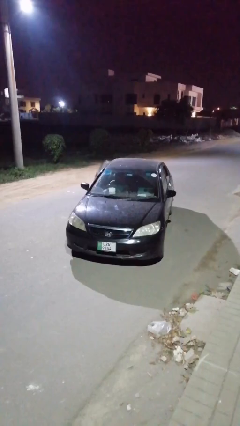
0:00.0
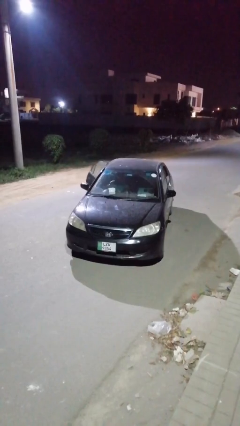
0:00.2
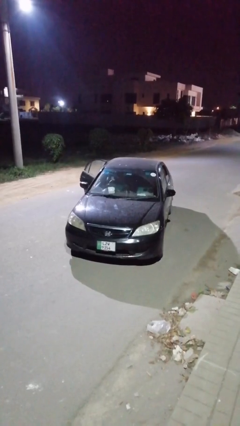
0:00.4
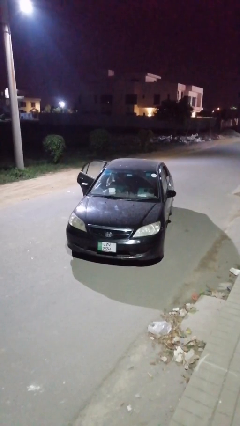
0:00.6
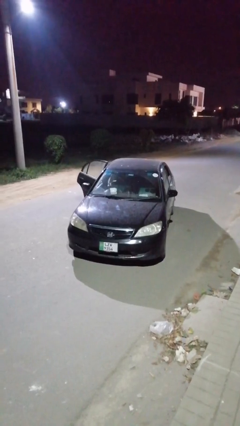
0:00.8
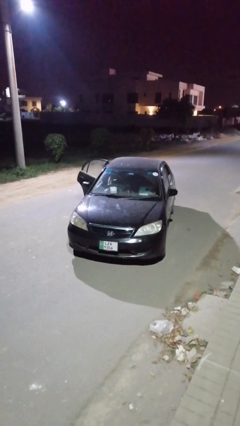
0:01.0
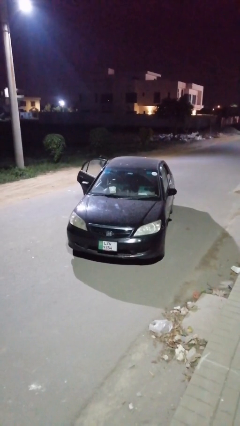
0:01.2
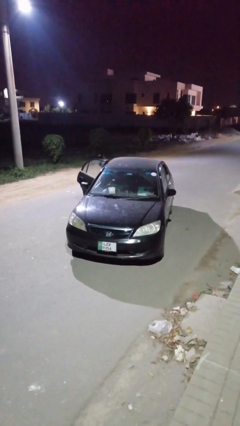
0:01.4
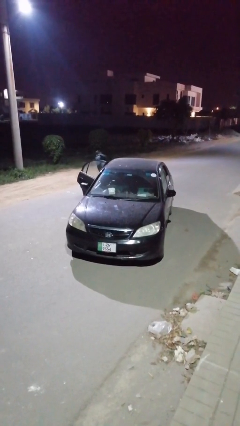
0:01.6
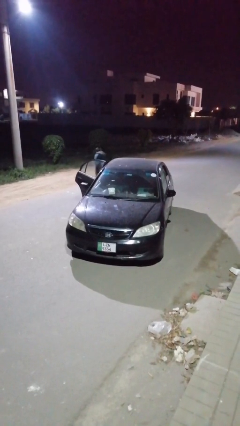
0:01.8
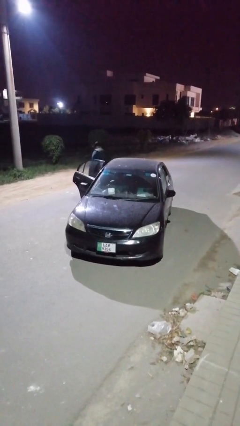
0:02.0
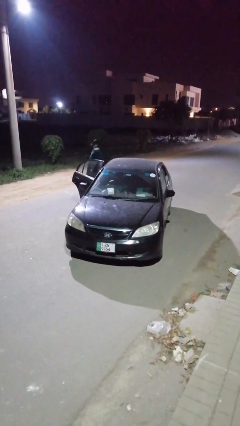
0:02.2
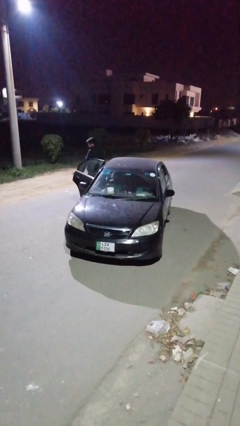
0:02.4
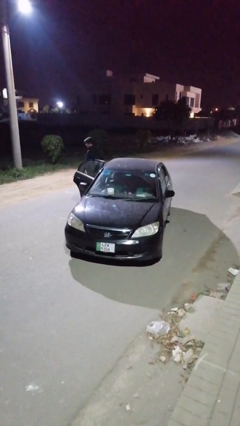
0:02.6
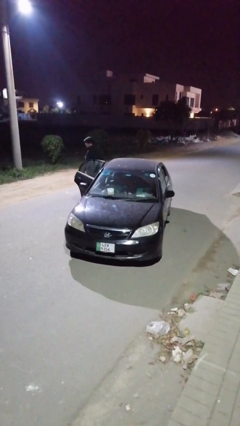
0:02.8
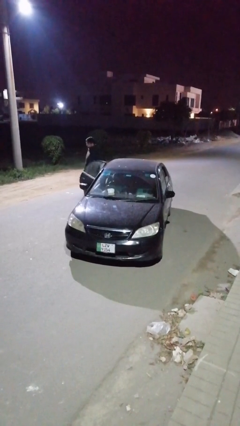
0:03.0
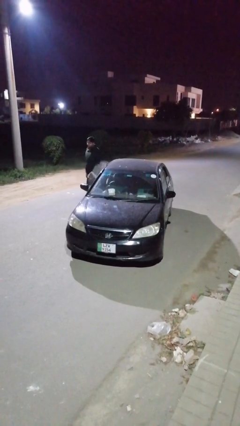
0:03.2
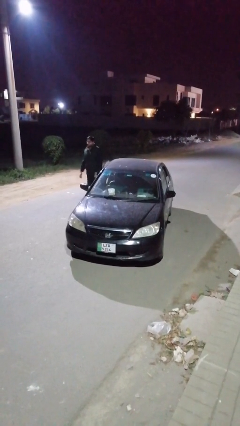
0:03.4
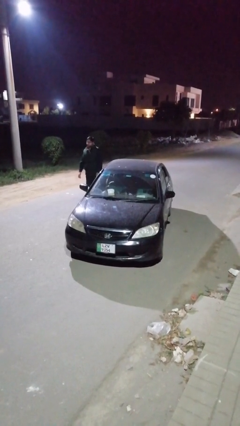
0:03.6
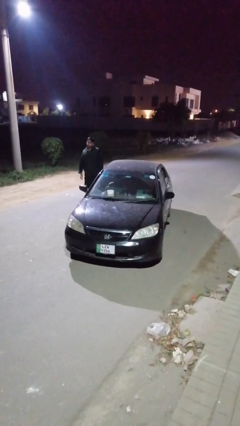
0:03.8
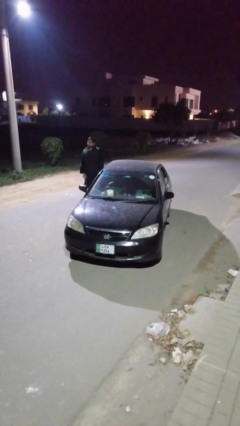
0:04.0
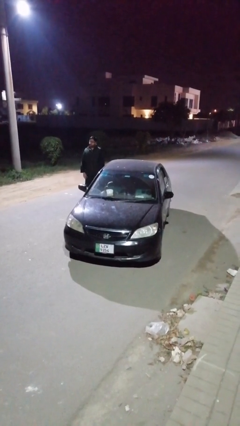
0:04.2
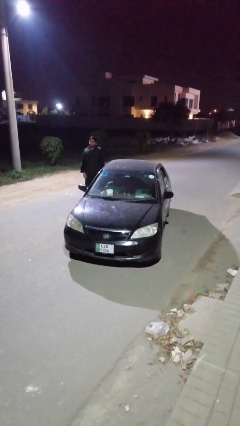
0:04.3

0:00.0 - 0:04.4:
car drops off person

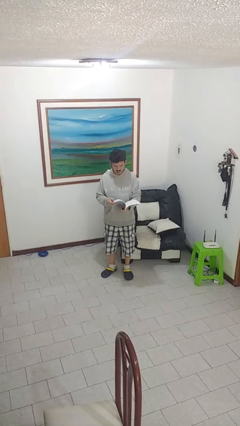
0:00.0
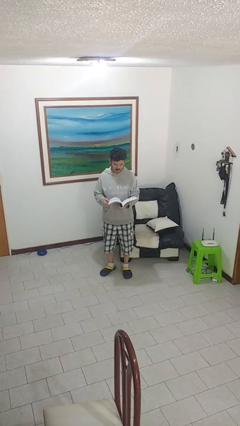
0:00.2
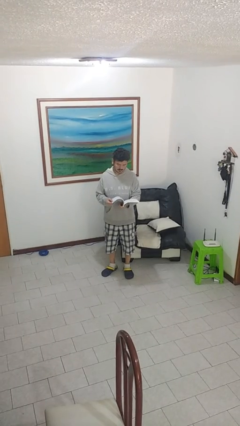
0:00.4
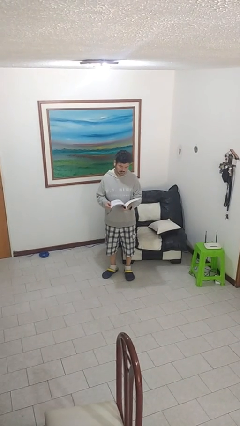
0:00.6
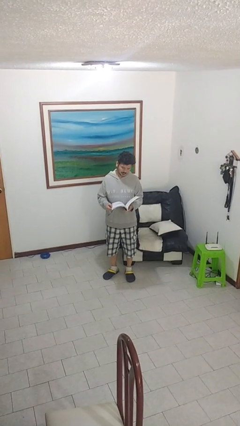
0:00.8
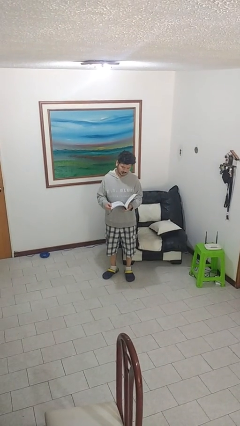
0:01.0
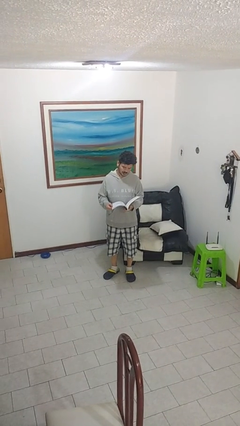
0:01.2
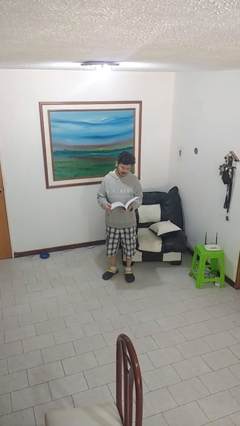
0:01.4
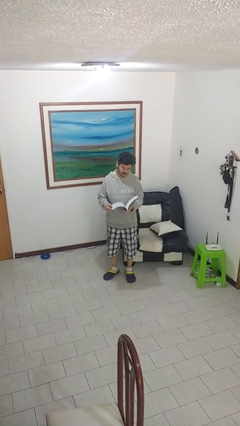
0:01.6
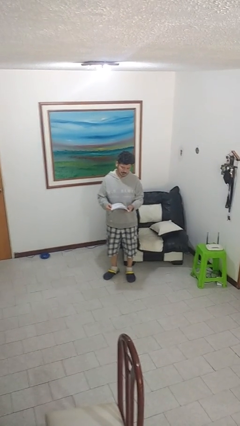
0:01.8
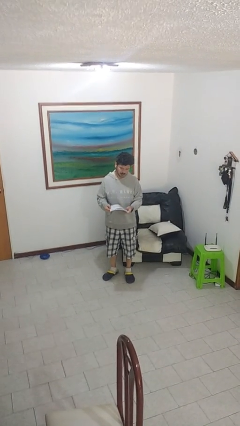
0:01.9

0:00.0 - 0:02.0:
person reads magazine

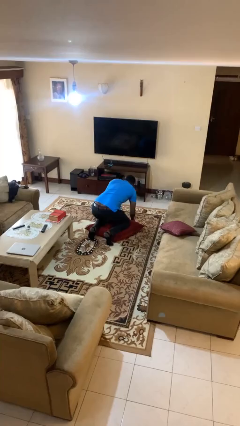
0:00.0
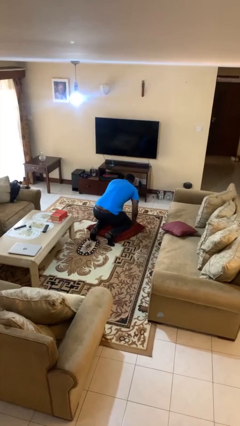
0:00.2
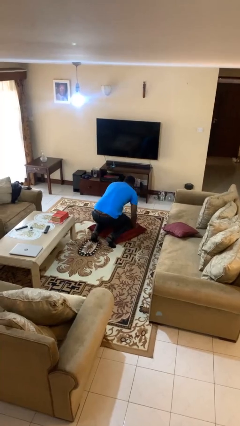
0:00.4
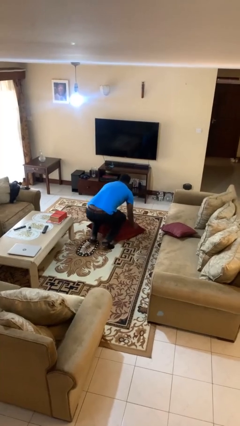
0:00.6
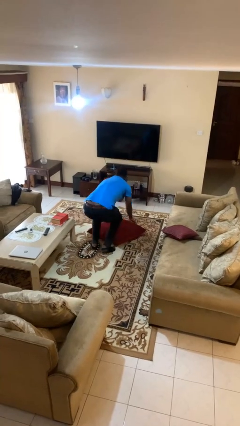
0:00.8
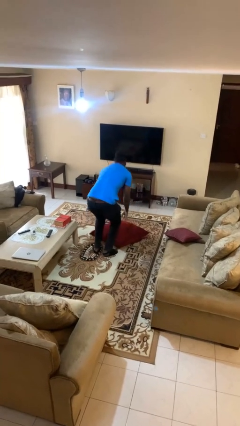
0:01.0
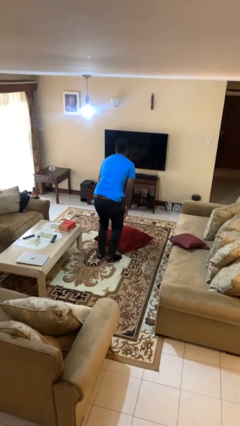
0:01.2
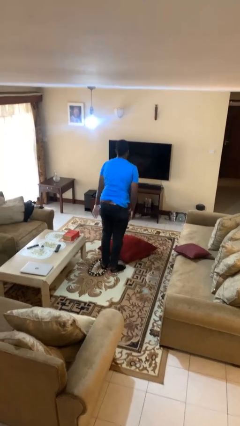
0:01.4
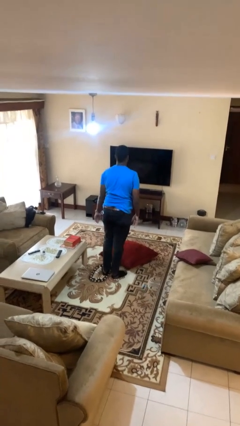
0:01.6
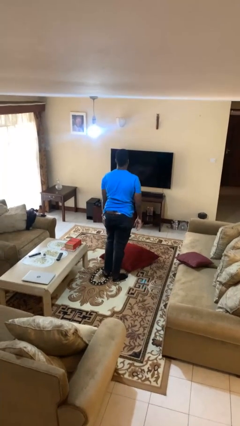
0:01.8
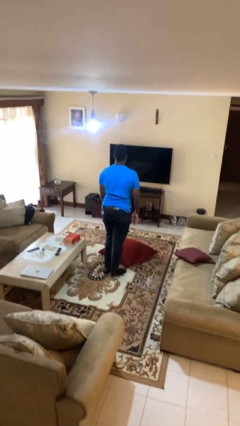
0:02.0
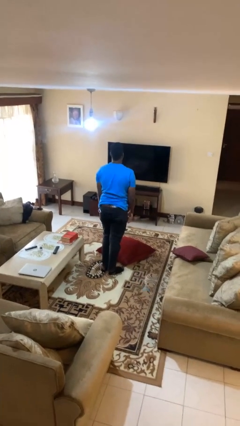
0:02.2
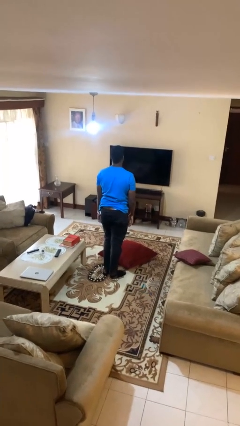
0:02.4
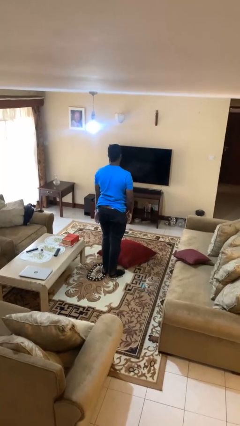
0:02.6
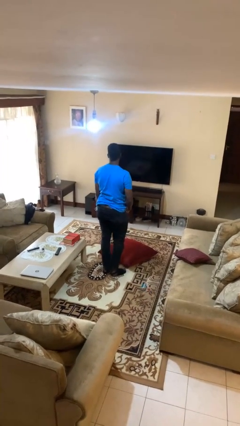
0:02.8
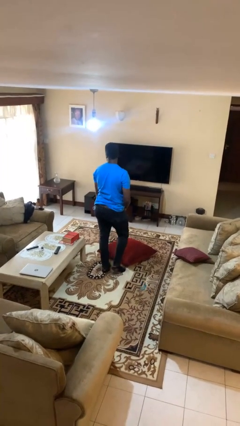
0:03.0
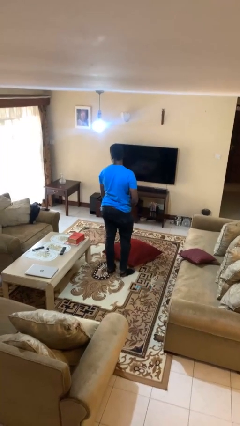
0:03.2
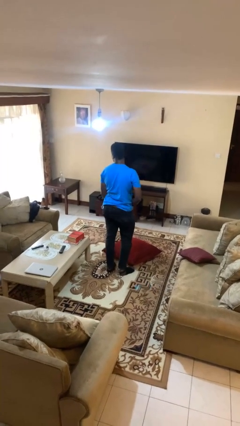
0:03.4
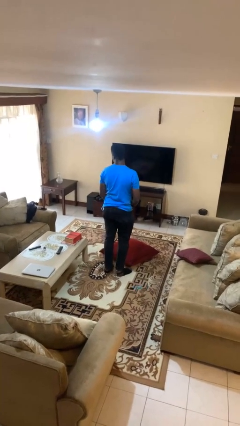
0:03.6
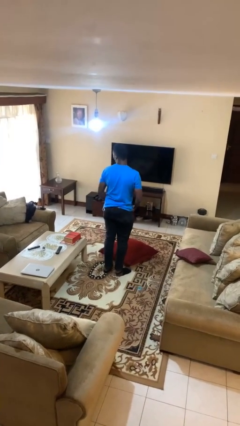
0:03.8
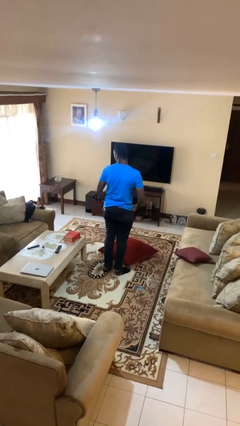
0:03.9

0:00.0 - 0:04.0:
person stands up from floor

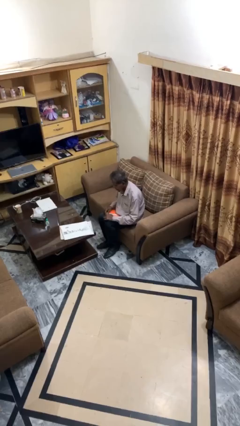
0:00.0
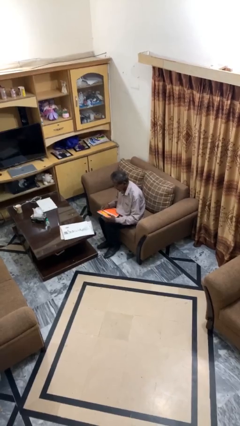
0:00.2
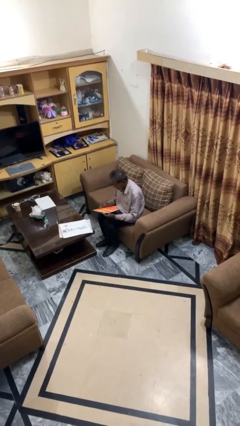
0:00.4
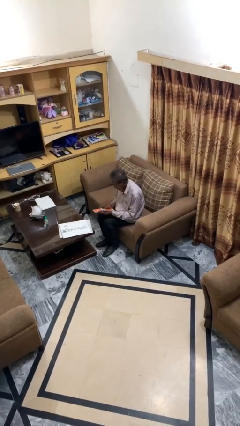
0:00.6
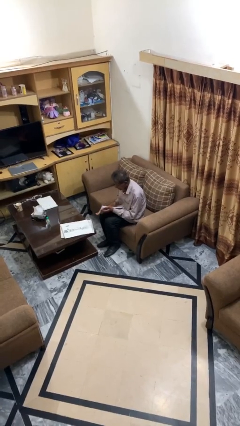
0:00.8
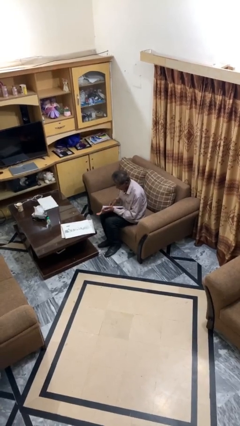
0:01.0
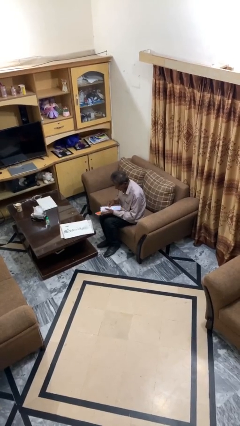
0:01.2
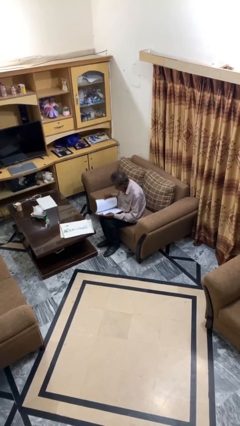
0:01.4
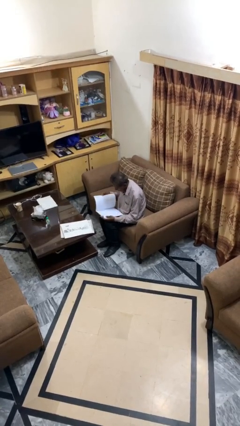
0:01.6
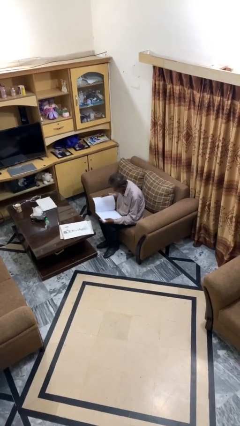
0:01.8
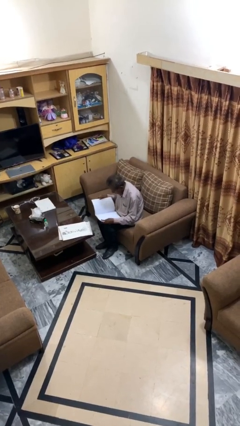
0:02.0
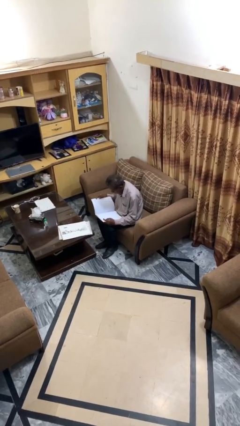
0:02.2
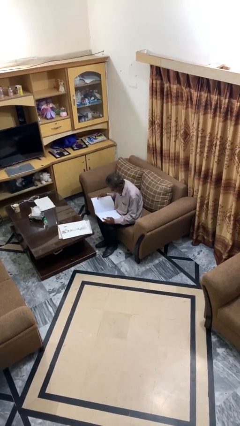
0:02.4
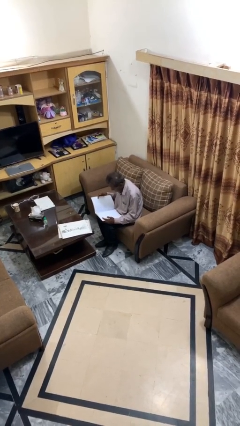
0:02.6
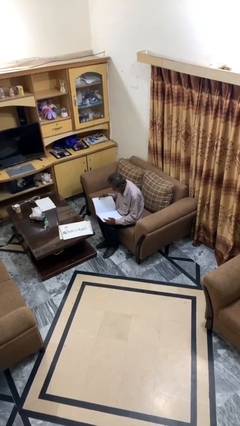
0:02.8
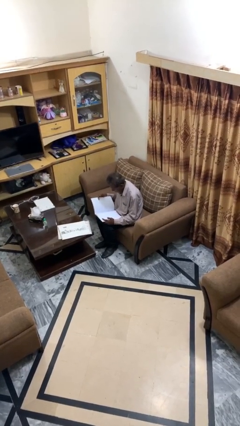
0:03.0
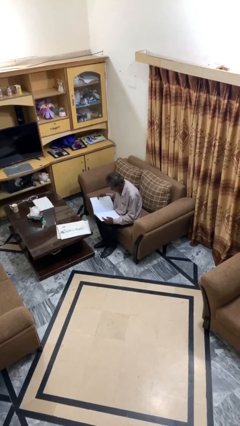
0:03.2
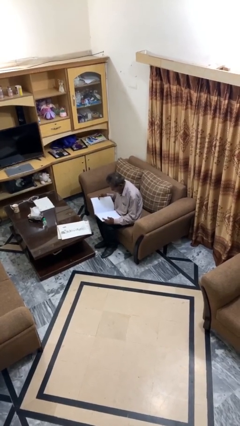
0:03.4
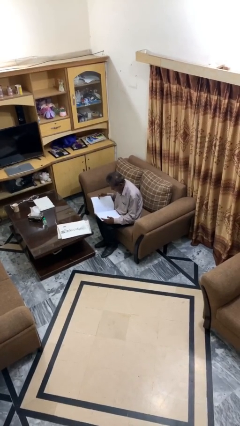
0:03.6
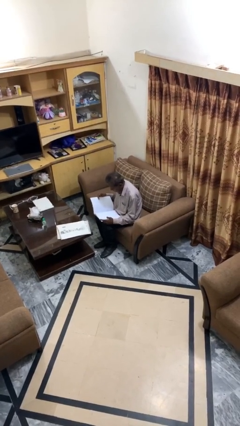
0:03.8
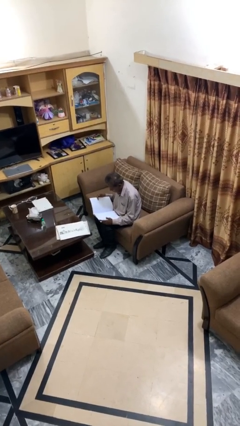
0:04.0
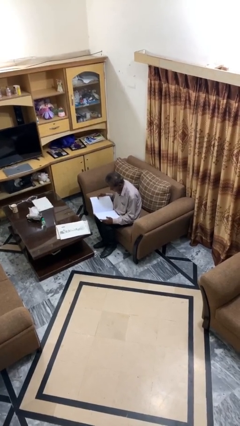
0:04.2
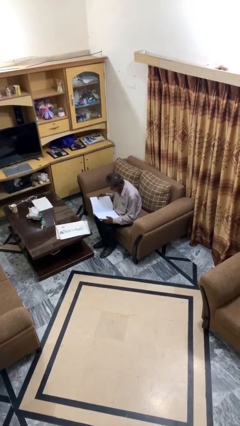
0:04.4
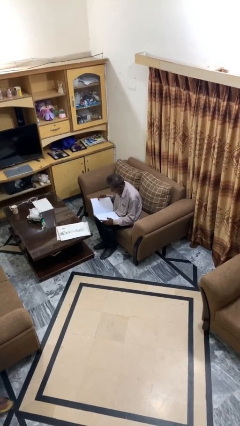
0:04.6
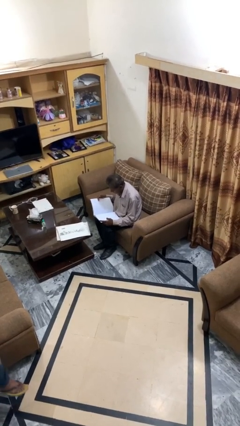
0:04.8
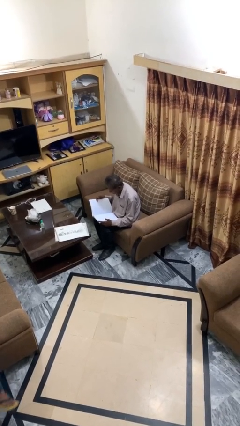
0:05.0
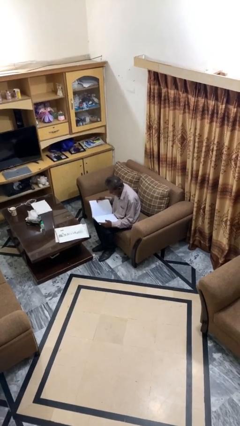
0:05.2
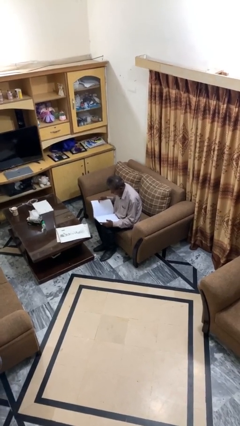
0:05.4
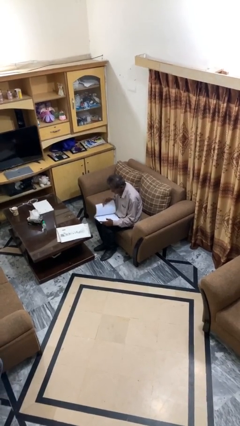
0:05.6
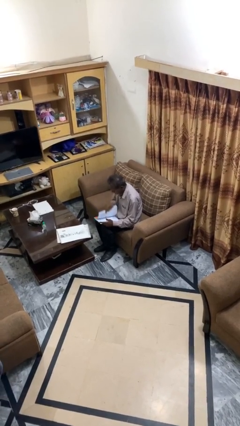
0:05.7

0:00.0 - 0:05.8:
person reads document

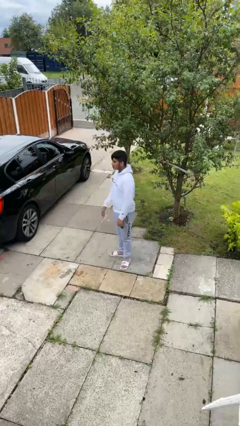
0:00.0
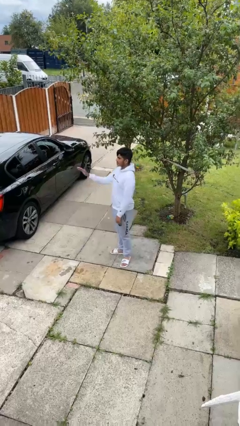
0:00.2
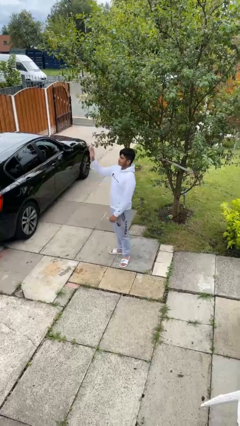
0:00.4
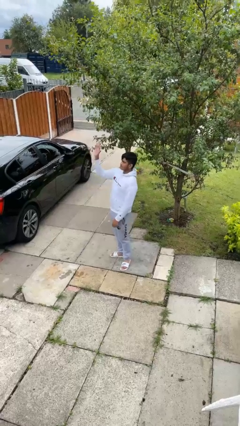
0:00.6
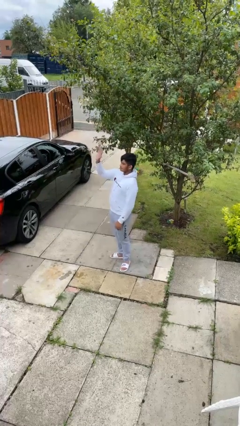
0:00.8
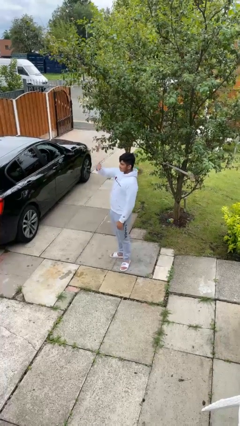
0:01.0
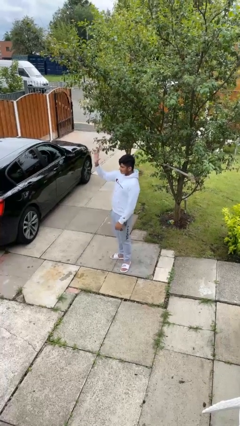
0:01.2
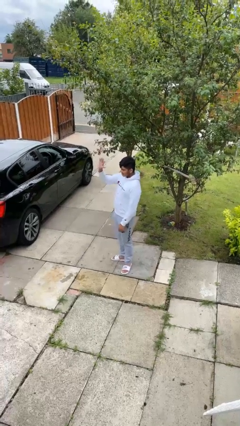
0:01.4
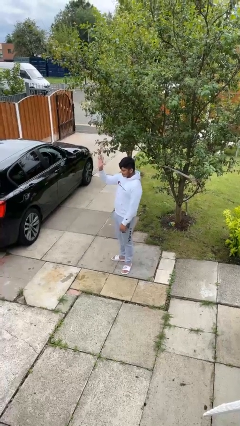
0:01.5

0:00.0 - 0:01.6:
person waves at person

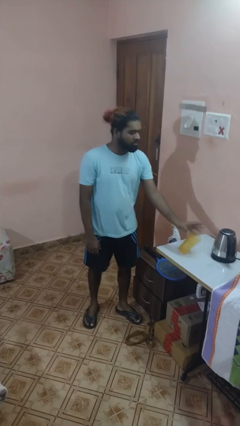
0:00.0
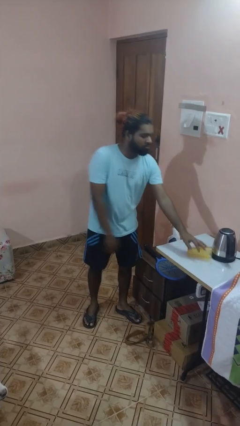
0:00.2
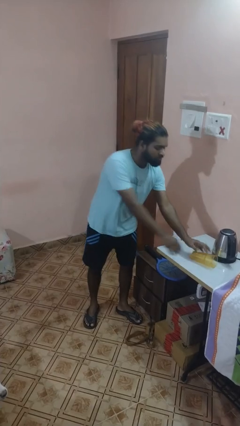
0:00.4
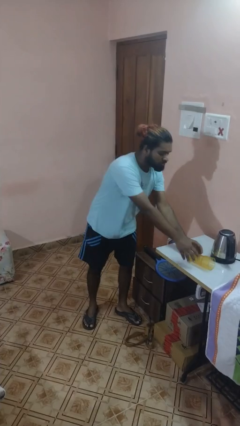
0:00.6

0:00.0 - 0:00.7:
person knocks over glass
